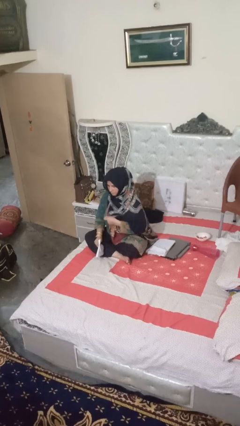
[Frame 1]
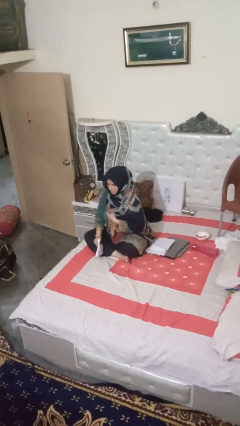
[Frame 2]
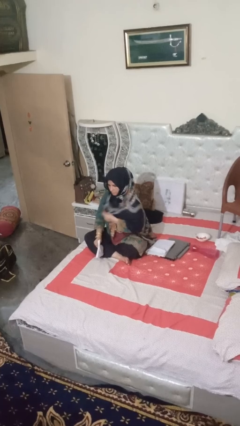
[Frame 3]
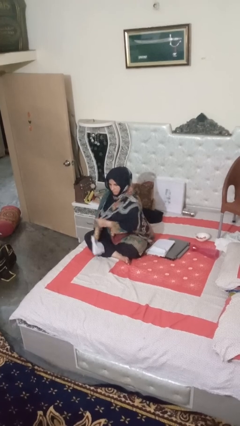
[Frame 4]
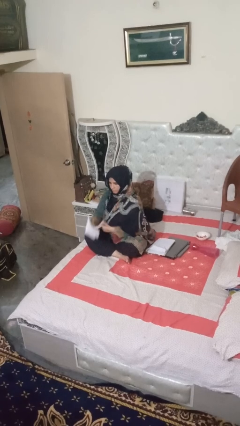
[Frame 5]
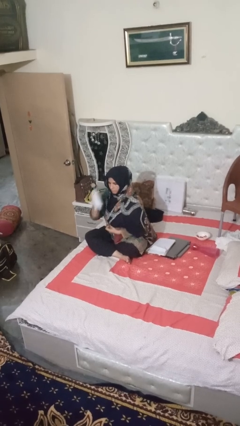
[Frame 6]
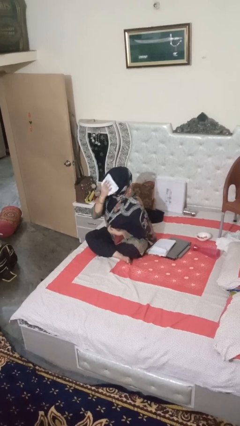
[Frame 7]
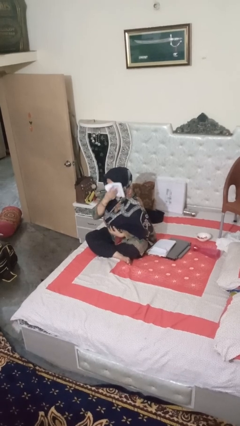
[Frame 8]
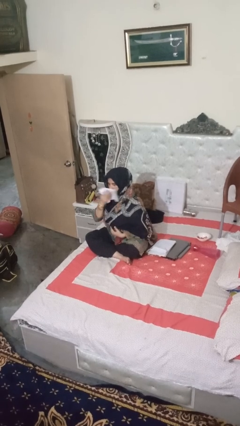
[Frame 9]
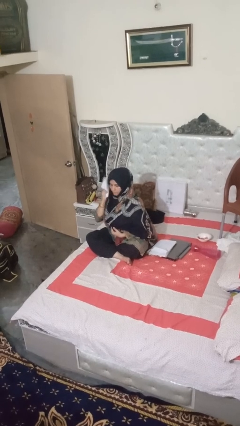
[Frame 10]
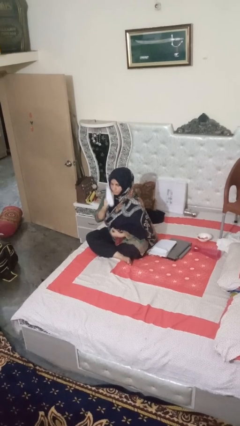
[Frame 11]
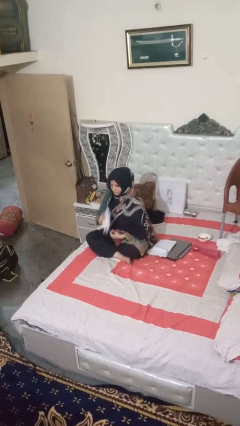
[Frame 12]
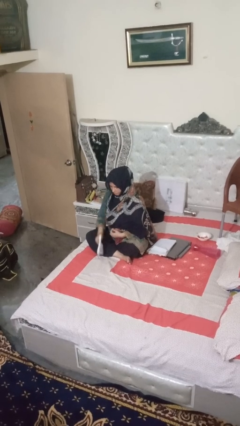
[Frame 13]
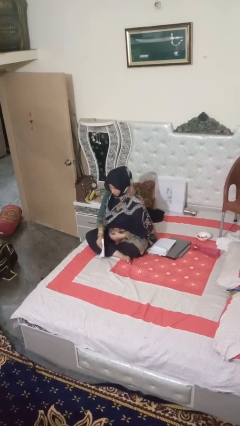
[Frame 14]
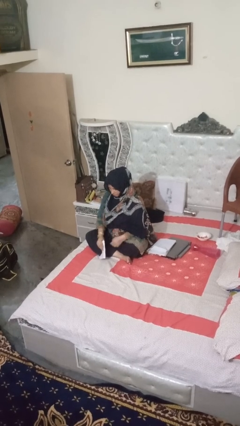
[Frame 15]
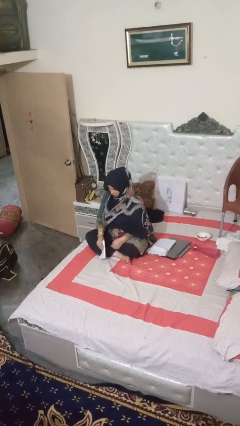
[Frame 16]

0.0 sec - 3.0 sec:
person wipes mouth with napkin

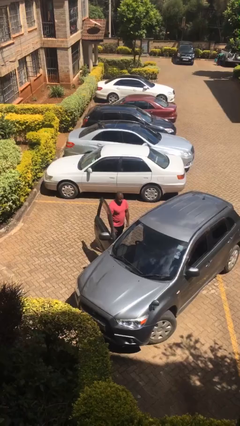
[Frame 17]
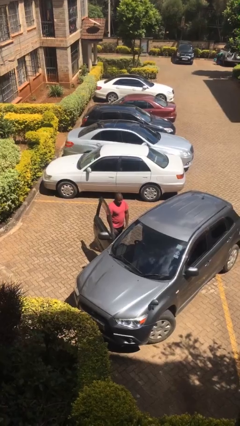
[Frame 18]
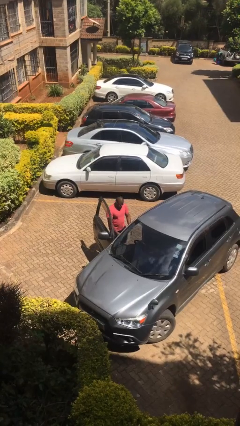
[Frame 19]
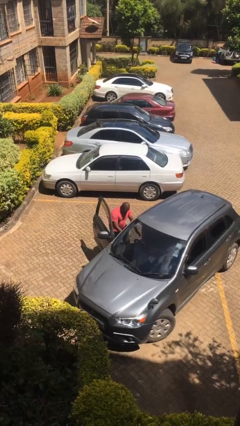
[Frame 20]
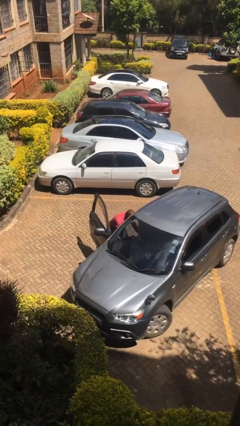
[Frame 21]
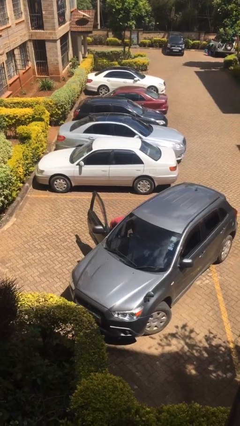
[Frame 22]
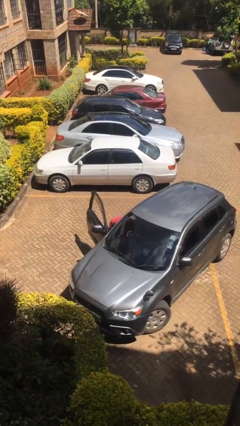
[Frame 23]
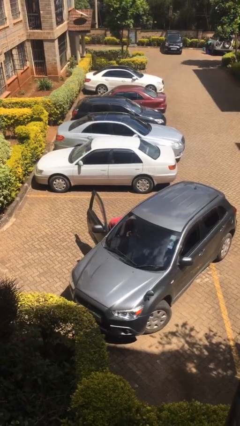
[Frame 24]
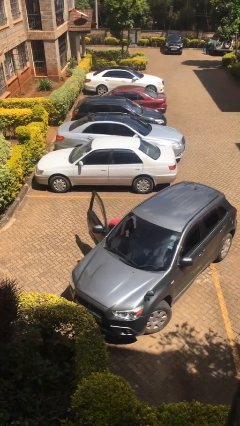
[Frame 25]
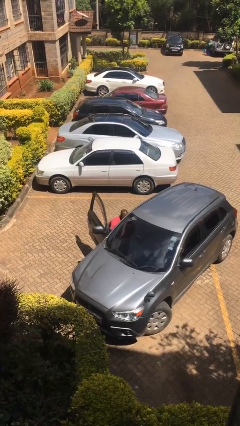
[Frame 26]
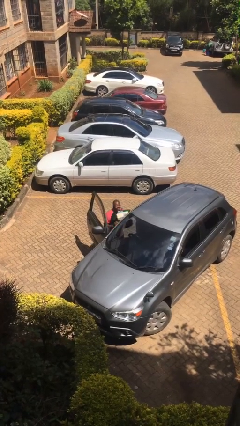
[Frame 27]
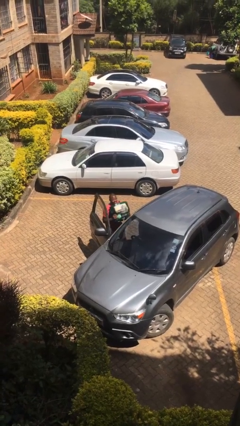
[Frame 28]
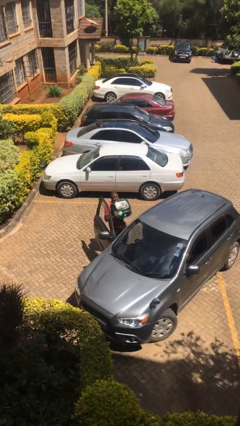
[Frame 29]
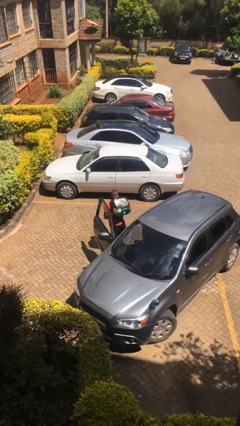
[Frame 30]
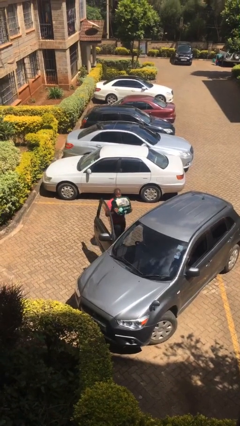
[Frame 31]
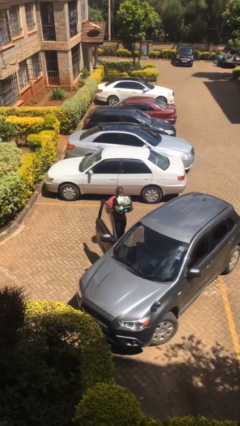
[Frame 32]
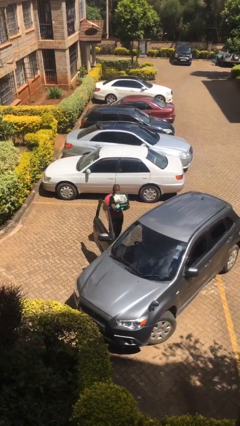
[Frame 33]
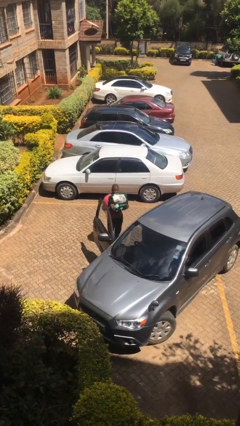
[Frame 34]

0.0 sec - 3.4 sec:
person unloads car

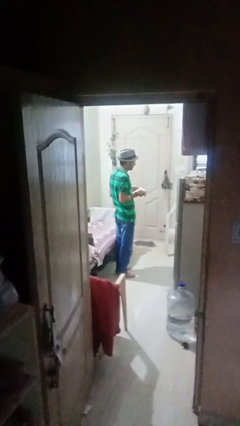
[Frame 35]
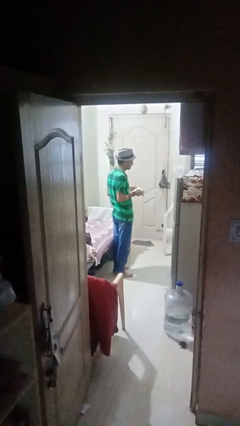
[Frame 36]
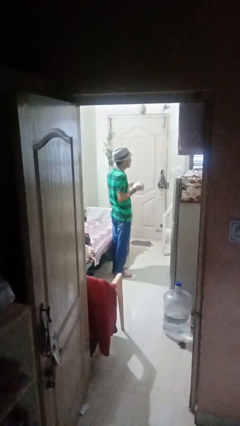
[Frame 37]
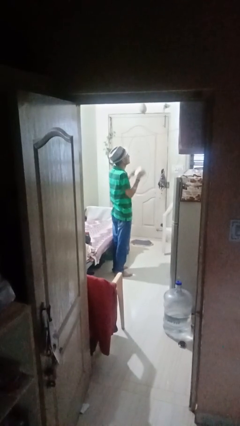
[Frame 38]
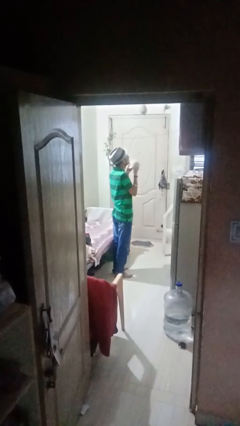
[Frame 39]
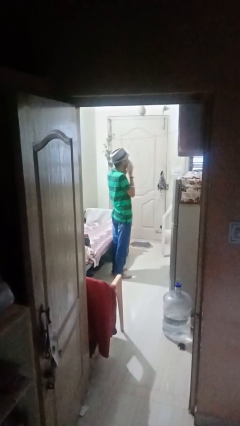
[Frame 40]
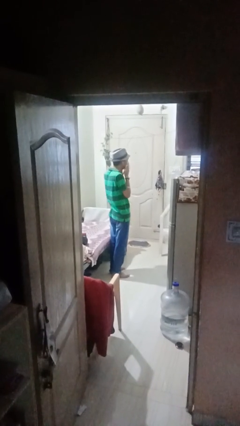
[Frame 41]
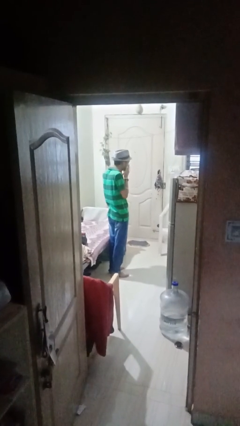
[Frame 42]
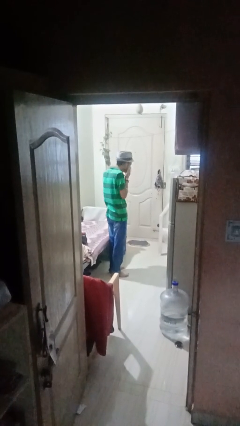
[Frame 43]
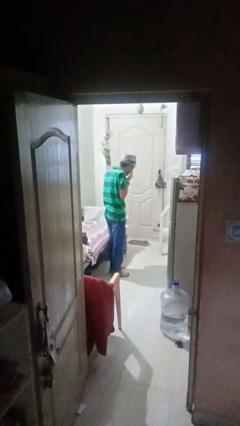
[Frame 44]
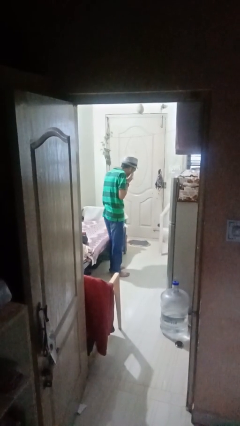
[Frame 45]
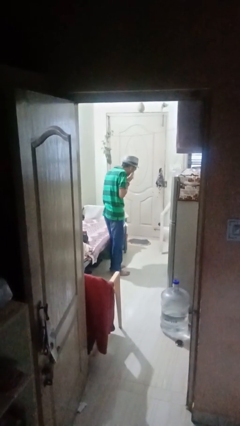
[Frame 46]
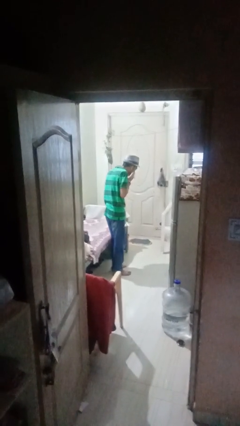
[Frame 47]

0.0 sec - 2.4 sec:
person blows nose

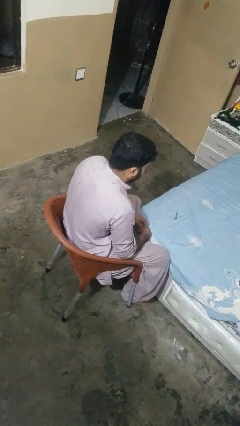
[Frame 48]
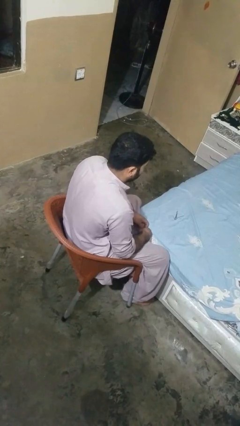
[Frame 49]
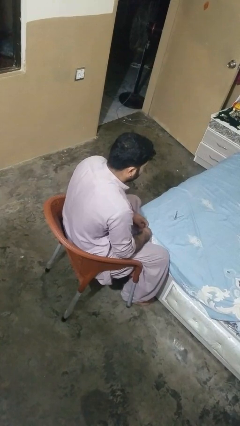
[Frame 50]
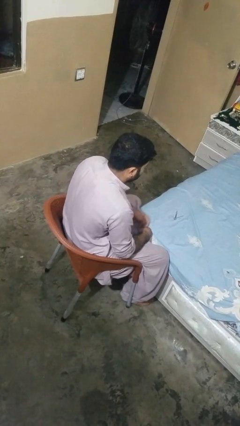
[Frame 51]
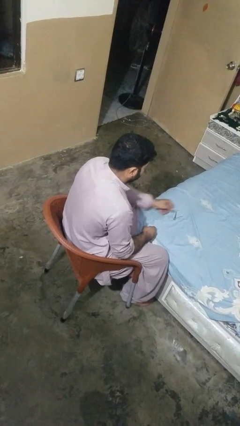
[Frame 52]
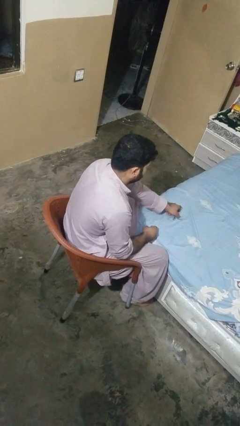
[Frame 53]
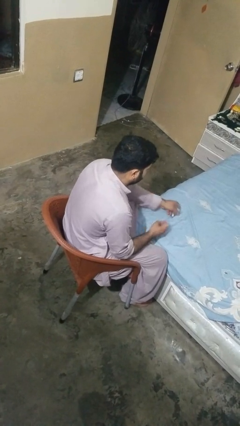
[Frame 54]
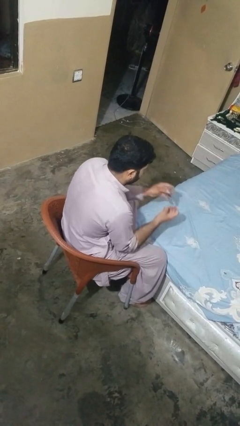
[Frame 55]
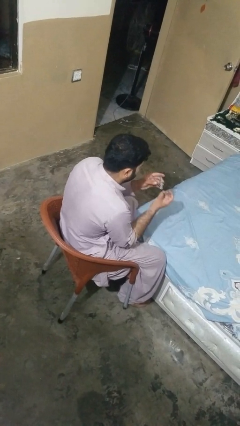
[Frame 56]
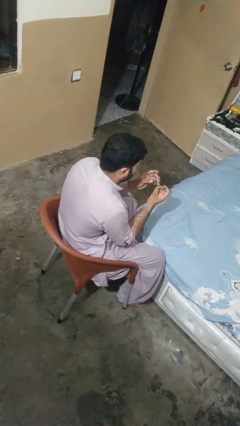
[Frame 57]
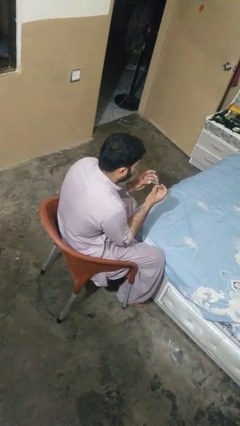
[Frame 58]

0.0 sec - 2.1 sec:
person clips fingernails

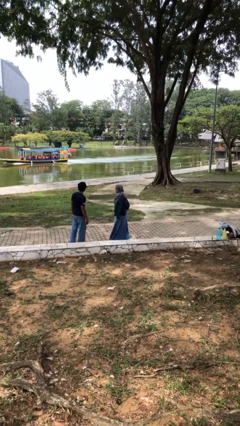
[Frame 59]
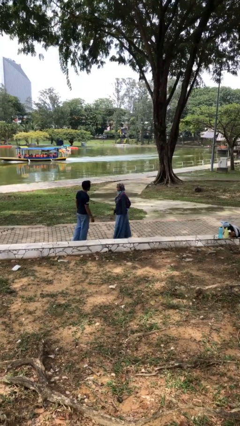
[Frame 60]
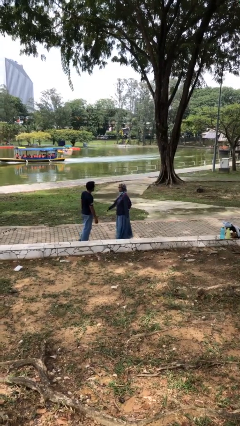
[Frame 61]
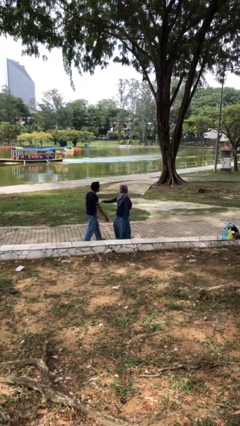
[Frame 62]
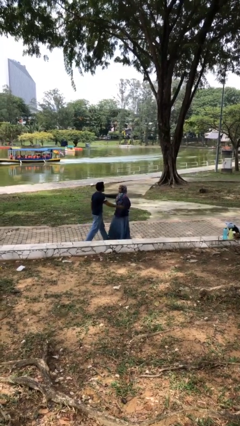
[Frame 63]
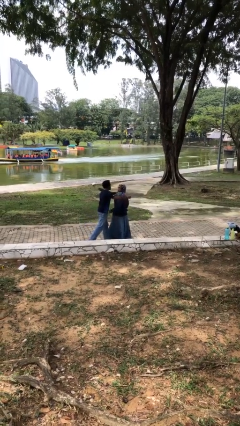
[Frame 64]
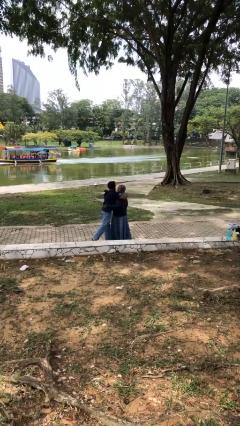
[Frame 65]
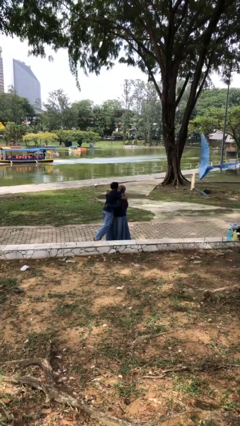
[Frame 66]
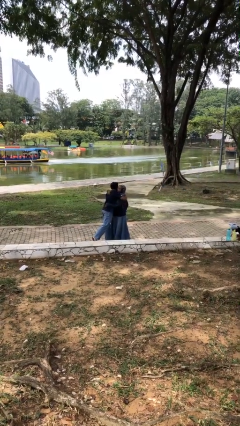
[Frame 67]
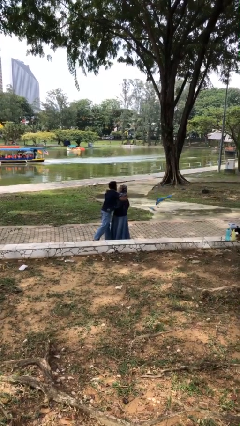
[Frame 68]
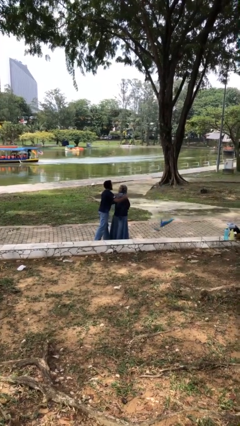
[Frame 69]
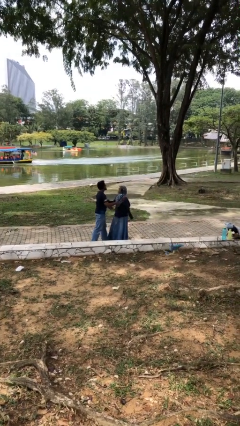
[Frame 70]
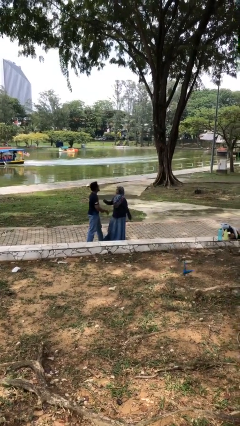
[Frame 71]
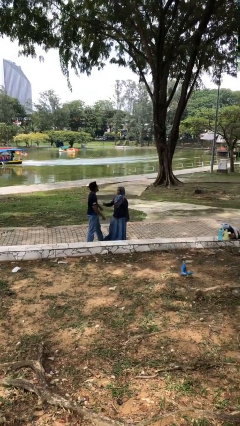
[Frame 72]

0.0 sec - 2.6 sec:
person embraces person

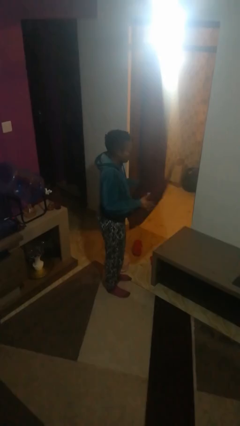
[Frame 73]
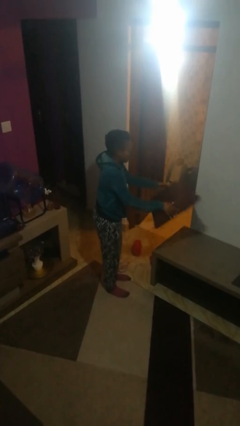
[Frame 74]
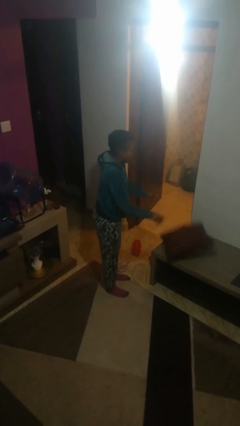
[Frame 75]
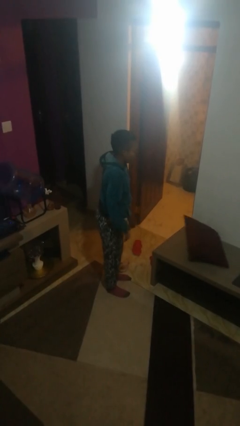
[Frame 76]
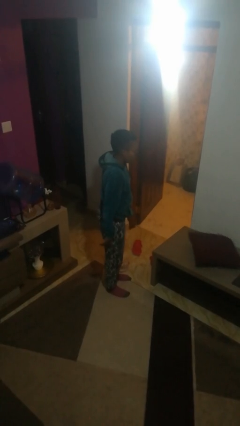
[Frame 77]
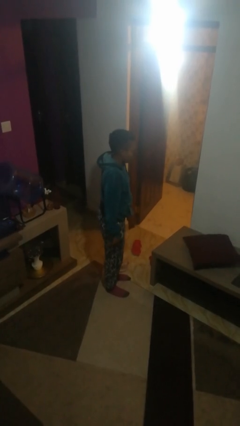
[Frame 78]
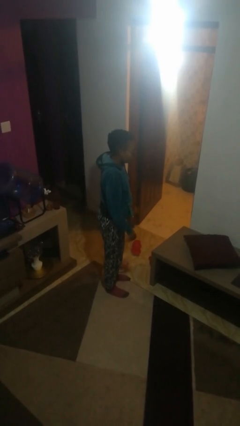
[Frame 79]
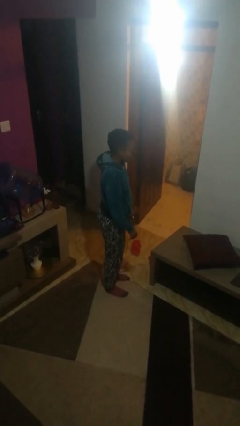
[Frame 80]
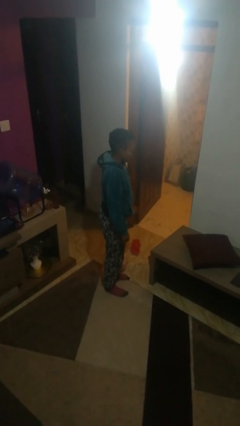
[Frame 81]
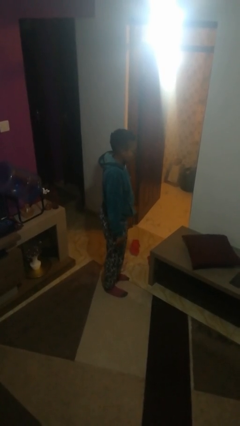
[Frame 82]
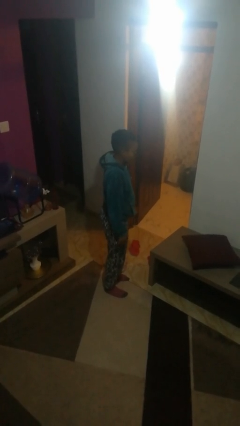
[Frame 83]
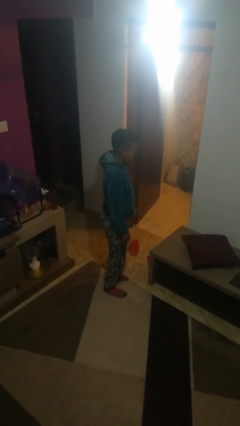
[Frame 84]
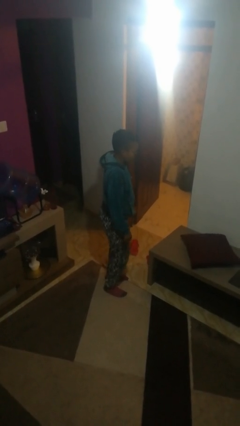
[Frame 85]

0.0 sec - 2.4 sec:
person throws object on table

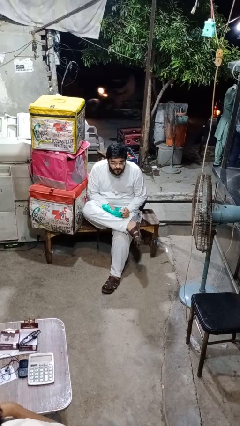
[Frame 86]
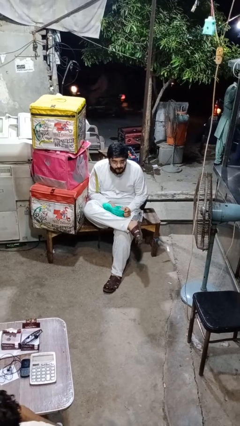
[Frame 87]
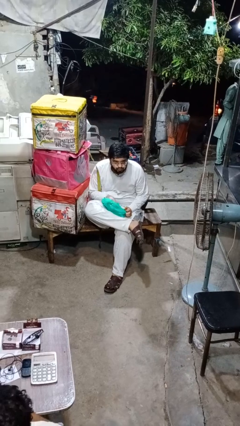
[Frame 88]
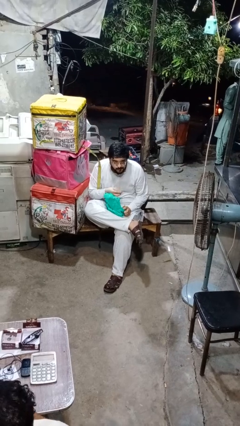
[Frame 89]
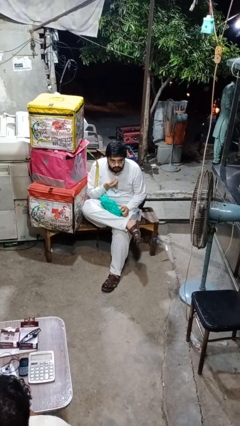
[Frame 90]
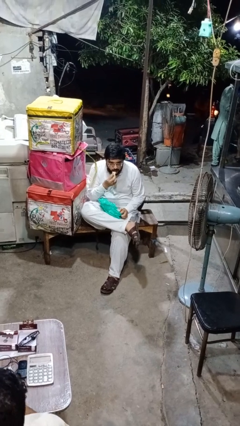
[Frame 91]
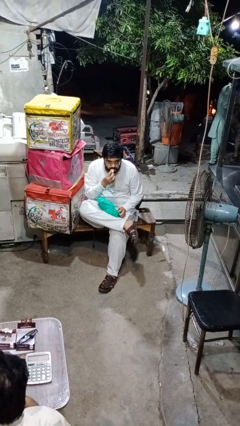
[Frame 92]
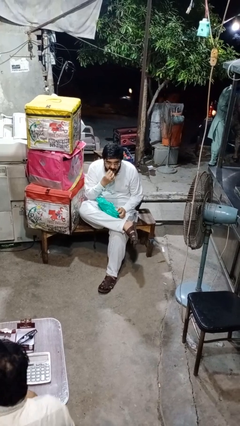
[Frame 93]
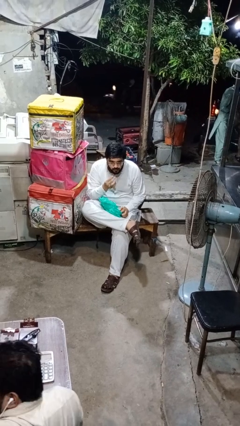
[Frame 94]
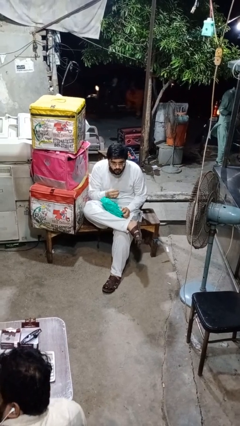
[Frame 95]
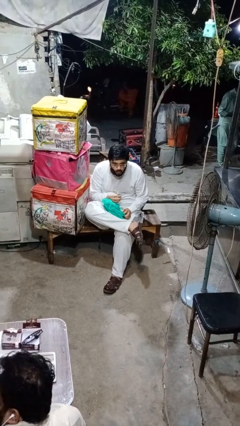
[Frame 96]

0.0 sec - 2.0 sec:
person eats snack from bag
